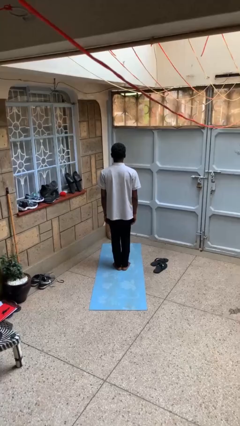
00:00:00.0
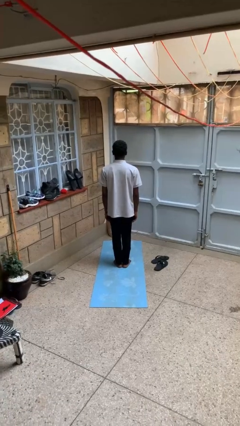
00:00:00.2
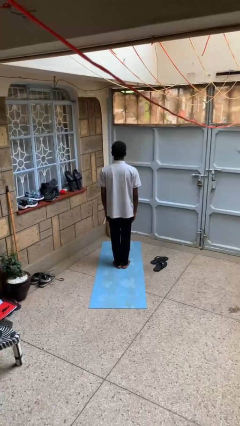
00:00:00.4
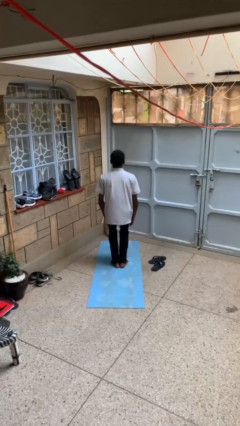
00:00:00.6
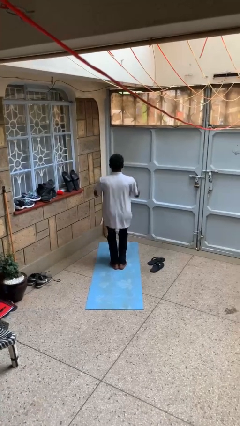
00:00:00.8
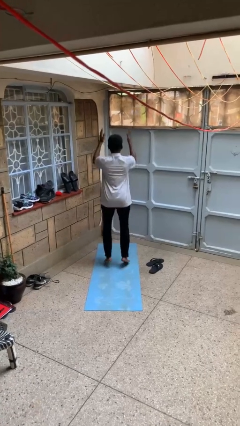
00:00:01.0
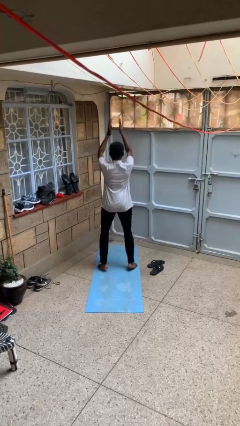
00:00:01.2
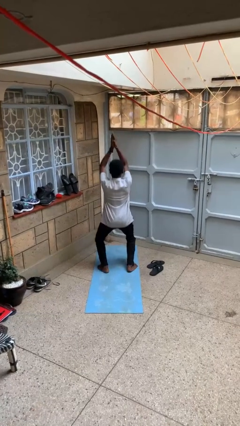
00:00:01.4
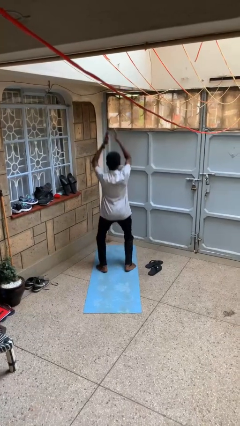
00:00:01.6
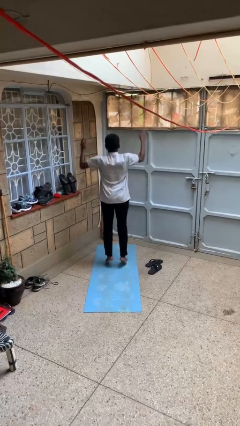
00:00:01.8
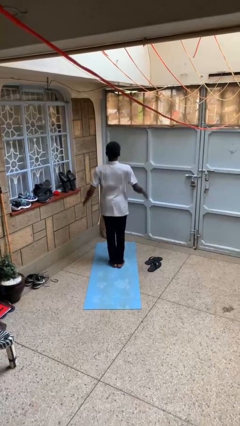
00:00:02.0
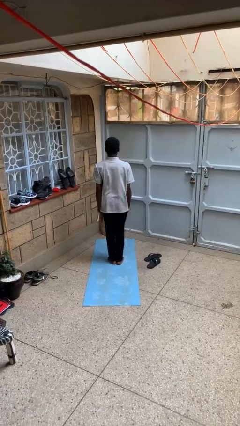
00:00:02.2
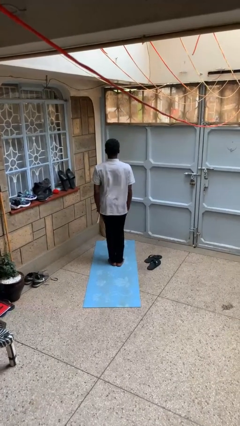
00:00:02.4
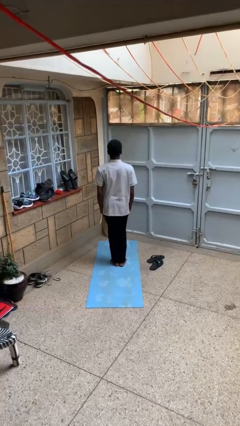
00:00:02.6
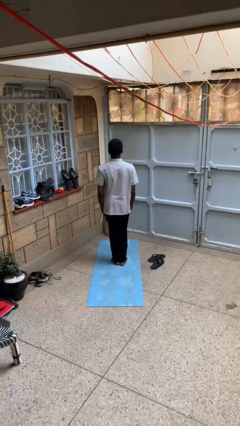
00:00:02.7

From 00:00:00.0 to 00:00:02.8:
person exercises with jumping jacks

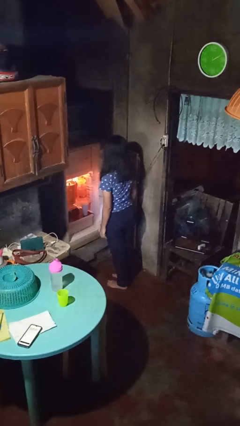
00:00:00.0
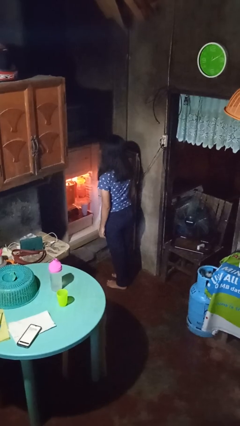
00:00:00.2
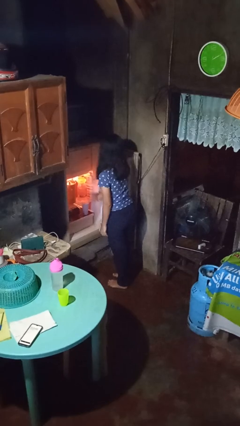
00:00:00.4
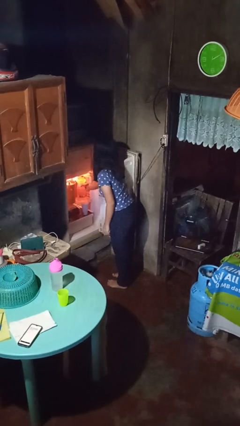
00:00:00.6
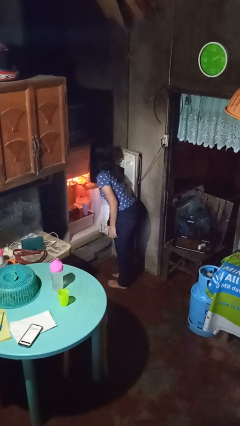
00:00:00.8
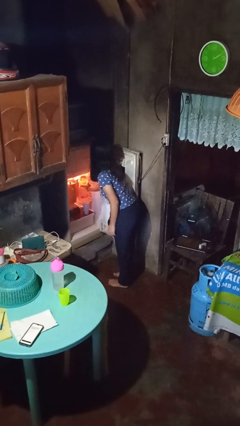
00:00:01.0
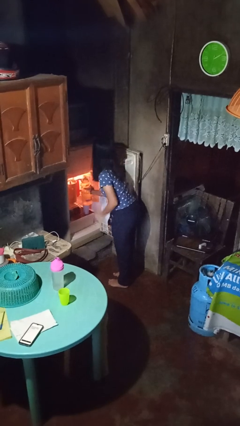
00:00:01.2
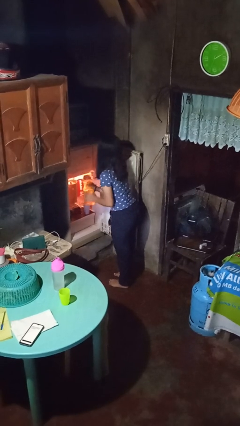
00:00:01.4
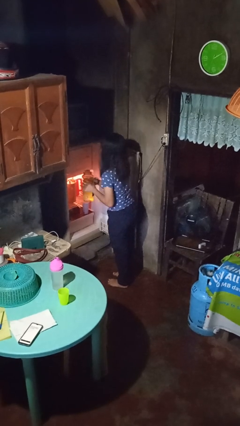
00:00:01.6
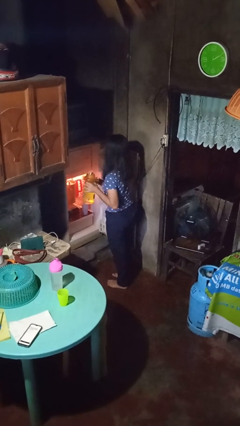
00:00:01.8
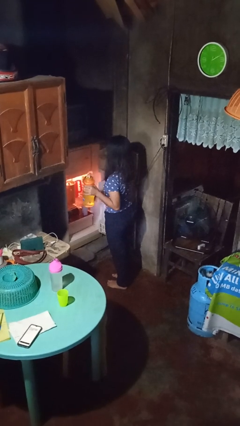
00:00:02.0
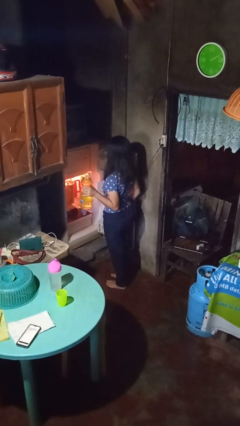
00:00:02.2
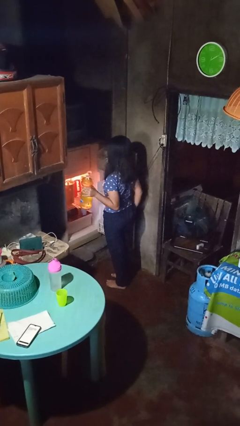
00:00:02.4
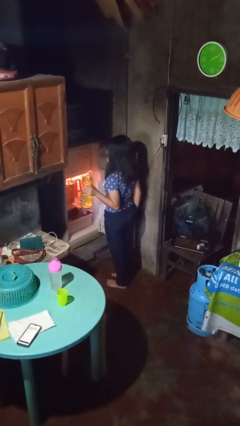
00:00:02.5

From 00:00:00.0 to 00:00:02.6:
person takes object from refrigerator

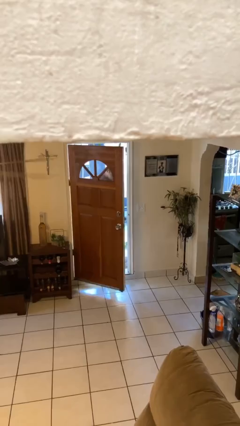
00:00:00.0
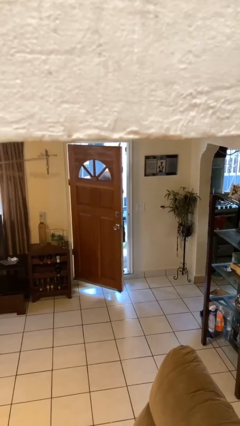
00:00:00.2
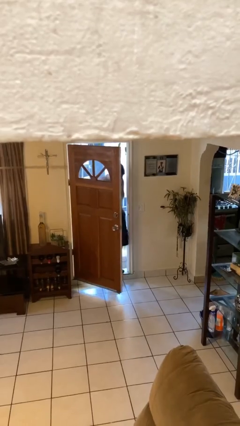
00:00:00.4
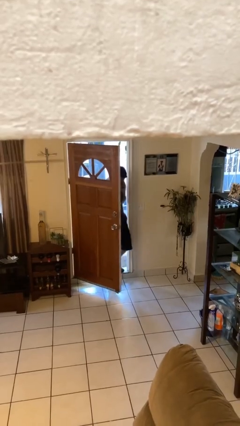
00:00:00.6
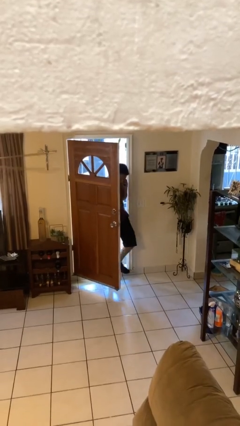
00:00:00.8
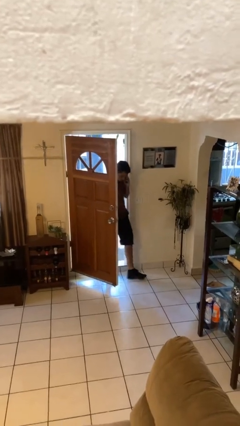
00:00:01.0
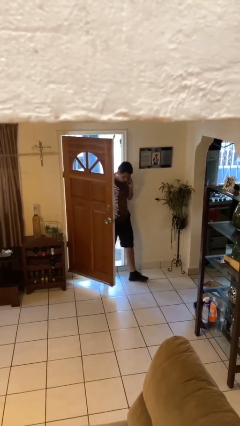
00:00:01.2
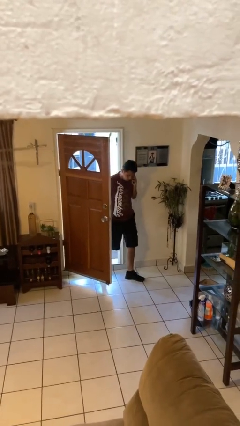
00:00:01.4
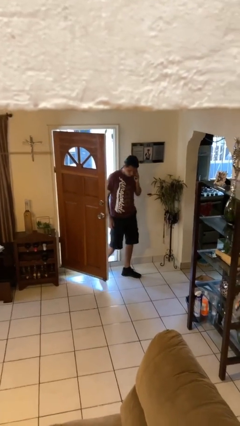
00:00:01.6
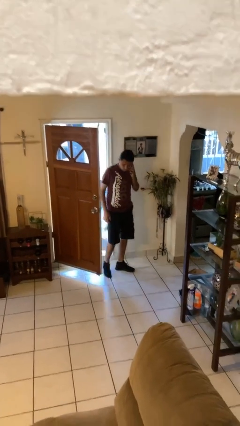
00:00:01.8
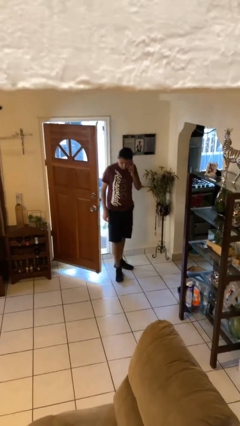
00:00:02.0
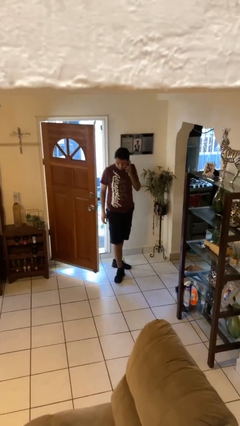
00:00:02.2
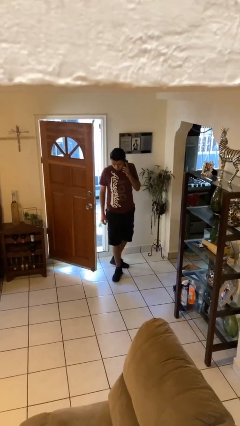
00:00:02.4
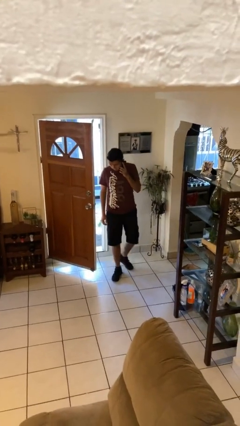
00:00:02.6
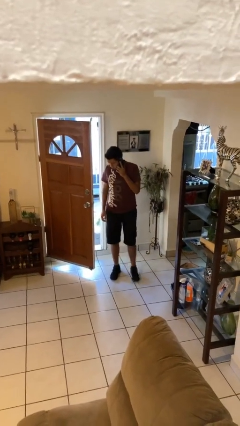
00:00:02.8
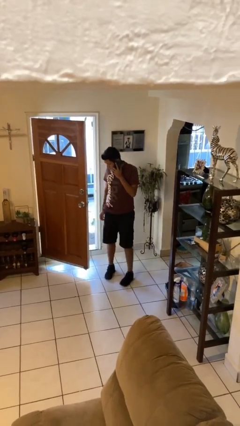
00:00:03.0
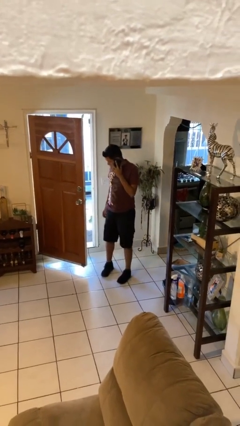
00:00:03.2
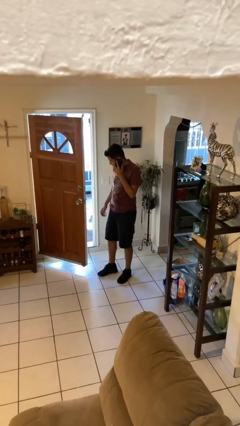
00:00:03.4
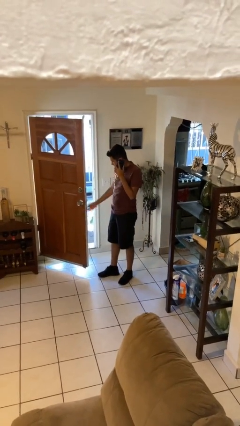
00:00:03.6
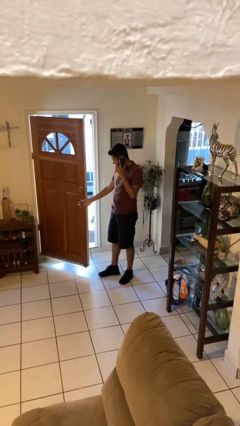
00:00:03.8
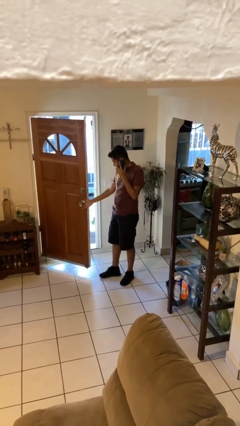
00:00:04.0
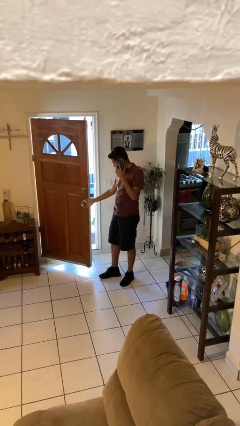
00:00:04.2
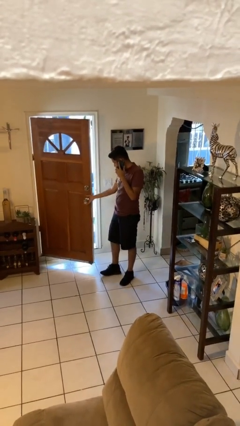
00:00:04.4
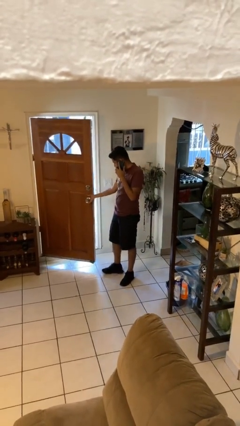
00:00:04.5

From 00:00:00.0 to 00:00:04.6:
person enters scene through structure

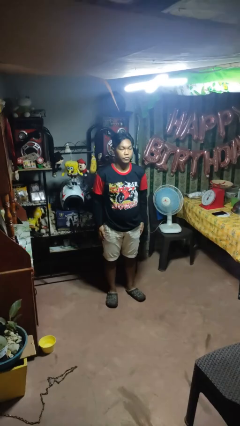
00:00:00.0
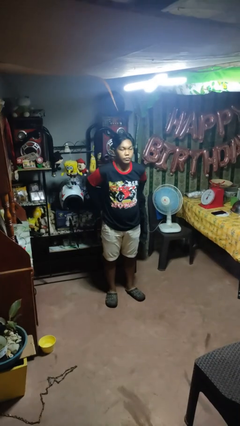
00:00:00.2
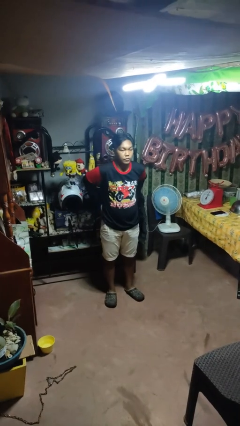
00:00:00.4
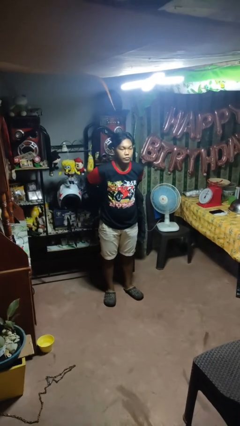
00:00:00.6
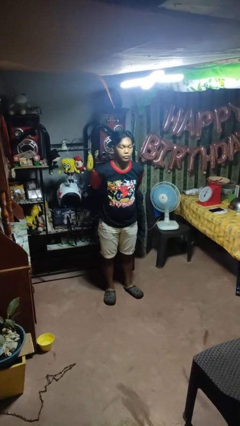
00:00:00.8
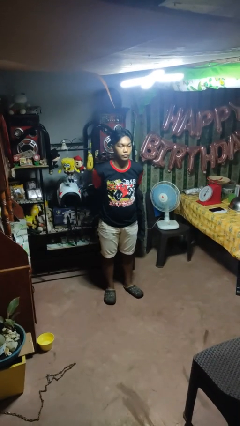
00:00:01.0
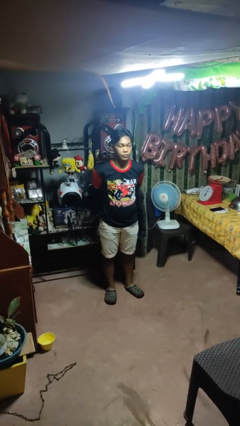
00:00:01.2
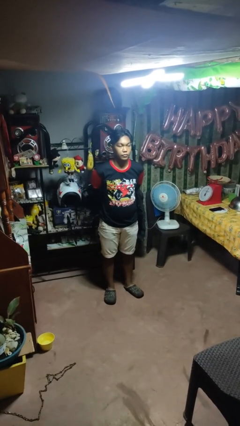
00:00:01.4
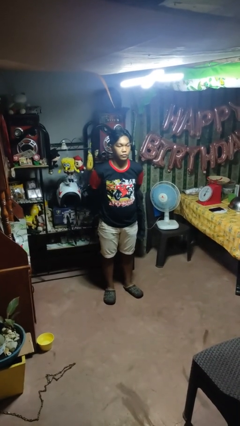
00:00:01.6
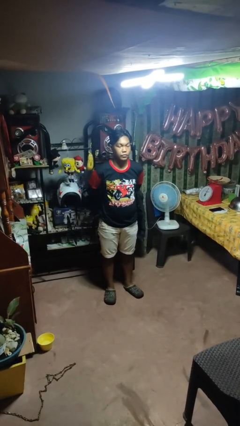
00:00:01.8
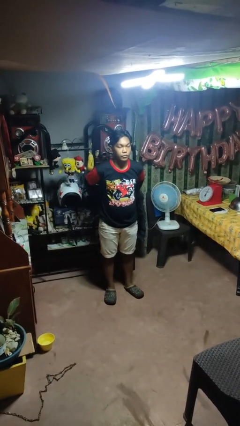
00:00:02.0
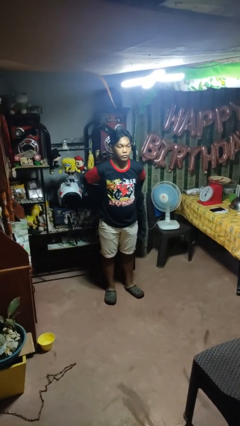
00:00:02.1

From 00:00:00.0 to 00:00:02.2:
person puts hands in back pockets

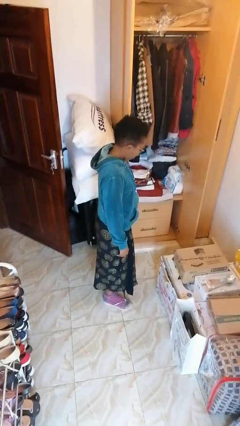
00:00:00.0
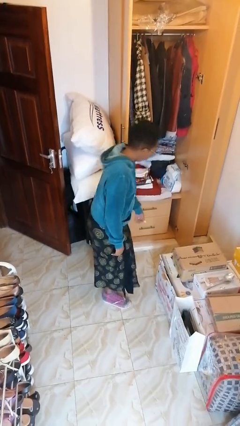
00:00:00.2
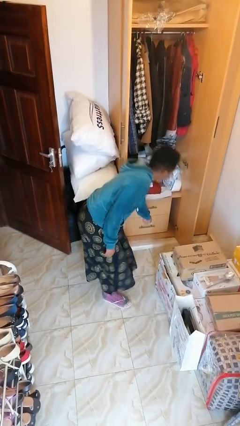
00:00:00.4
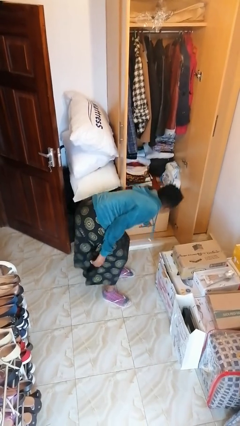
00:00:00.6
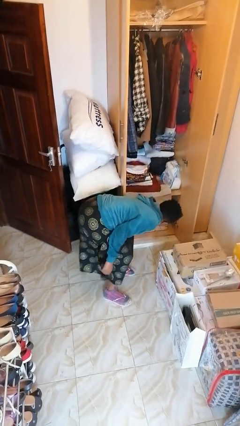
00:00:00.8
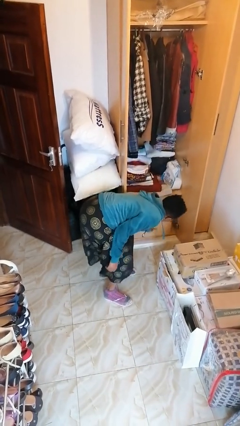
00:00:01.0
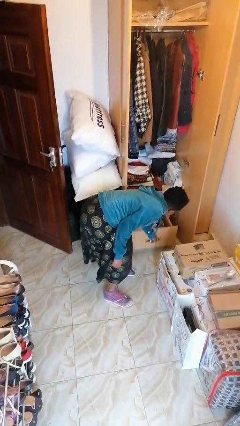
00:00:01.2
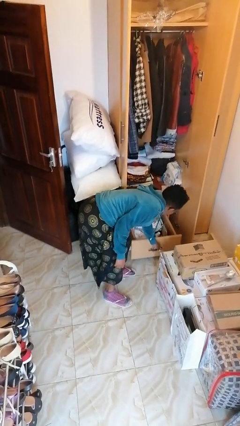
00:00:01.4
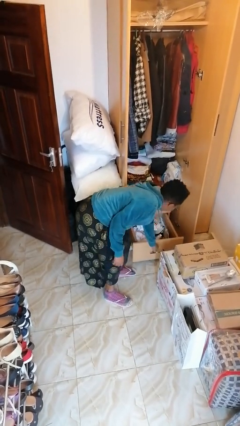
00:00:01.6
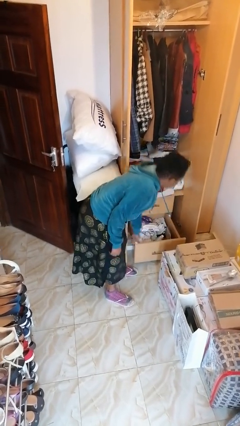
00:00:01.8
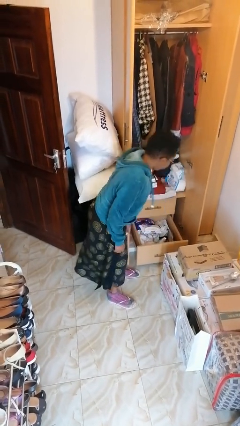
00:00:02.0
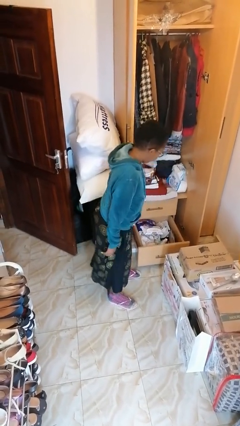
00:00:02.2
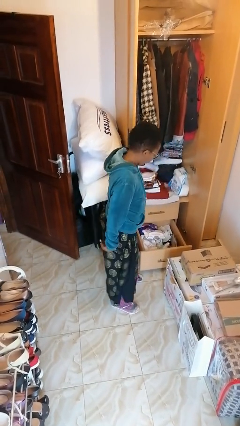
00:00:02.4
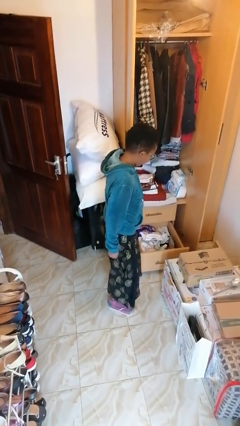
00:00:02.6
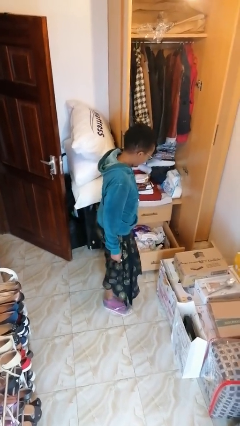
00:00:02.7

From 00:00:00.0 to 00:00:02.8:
person opens dresser drawer

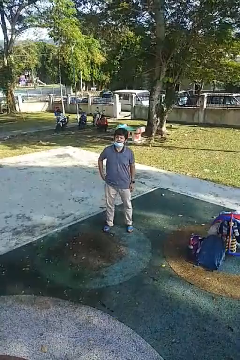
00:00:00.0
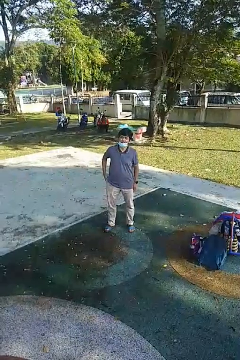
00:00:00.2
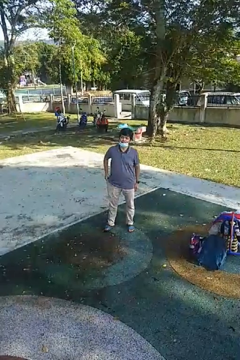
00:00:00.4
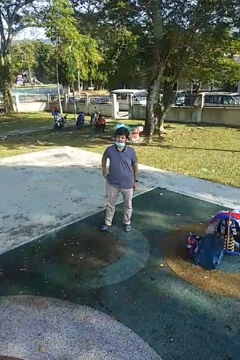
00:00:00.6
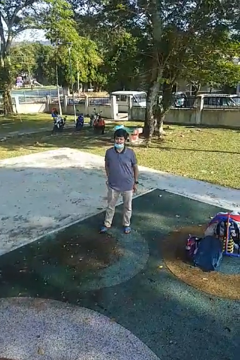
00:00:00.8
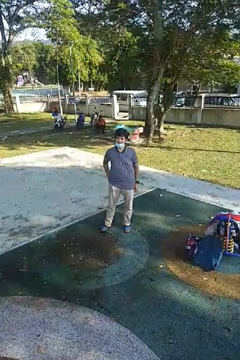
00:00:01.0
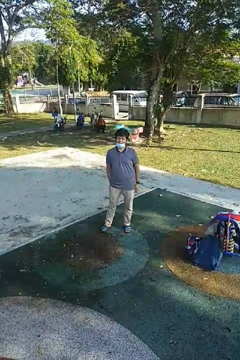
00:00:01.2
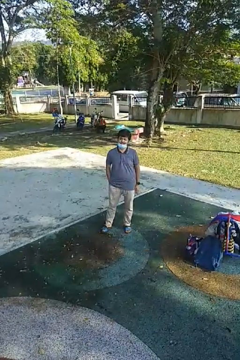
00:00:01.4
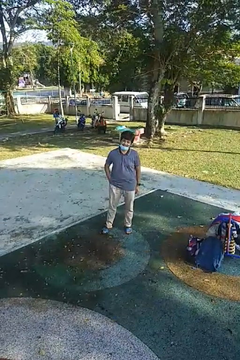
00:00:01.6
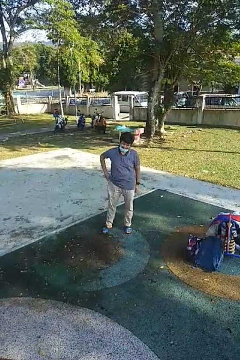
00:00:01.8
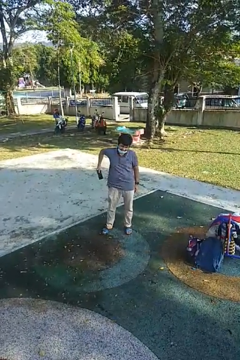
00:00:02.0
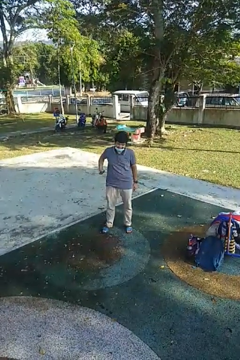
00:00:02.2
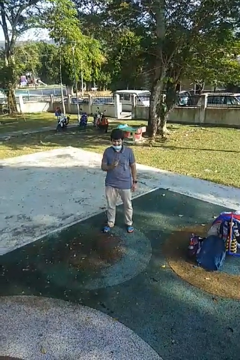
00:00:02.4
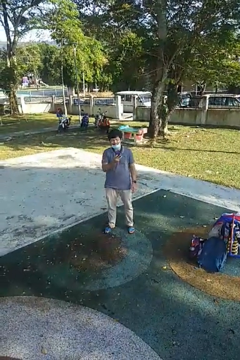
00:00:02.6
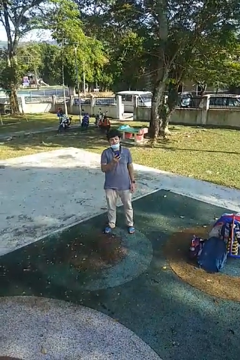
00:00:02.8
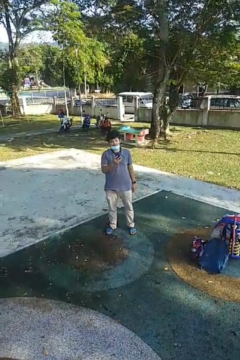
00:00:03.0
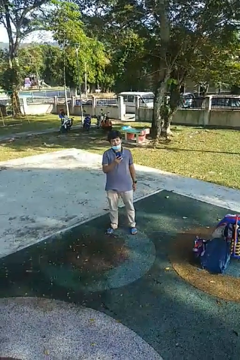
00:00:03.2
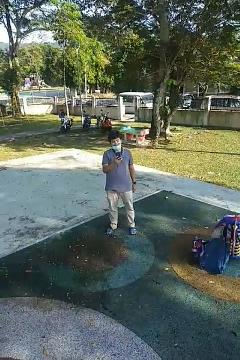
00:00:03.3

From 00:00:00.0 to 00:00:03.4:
person takes phone from pocket
